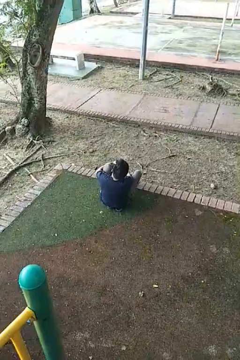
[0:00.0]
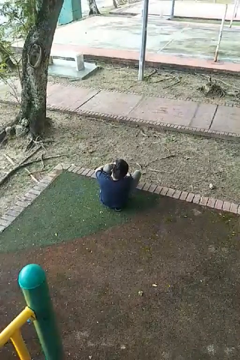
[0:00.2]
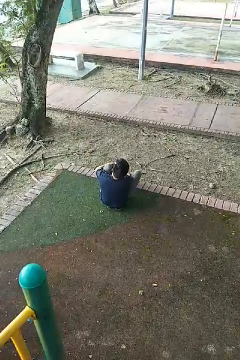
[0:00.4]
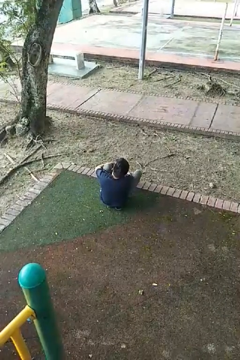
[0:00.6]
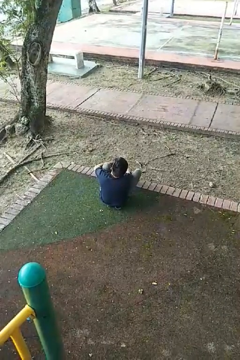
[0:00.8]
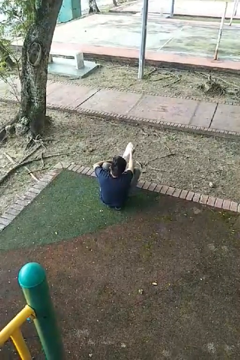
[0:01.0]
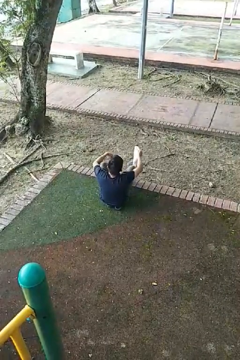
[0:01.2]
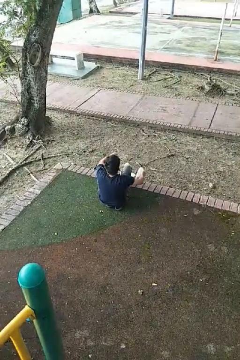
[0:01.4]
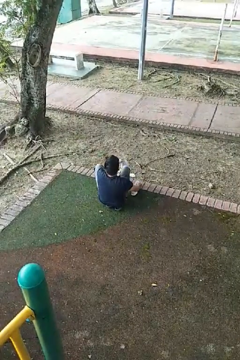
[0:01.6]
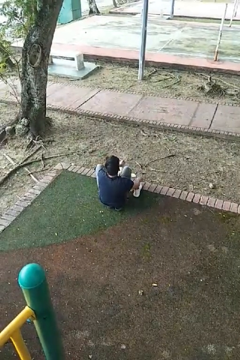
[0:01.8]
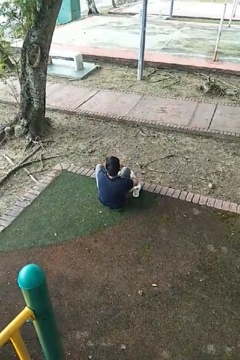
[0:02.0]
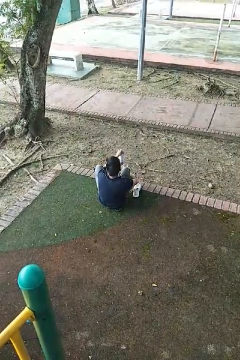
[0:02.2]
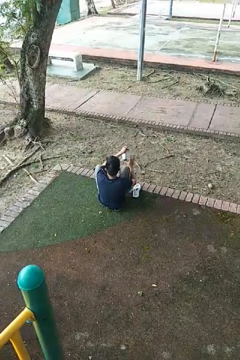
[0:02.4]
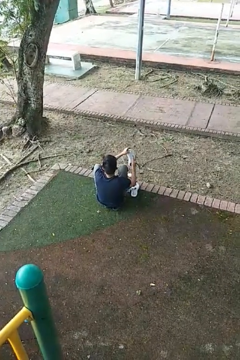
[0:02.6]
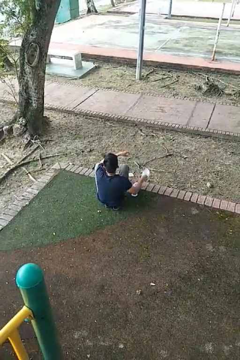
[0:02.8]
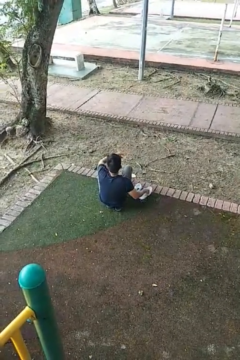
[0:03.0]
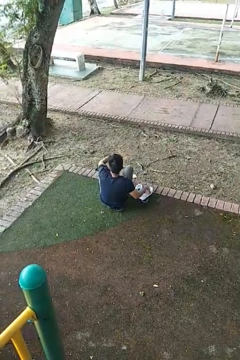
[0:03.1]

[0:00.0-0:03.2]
person takes off shoes

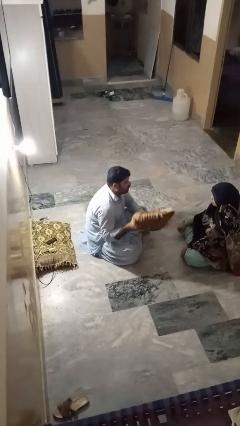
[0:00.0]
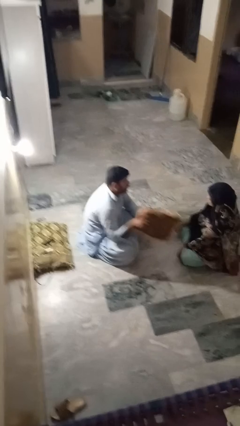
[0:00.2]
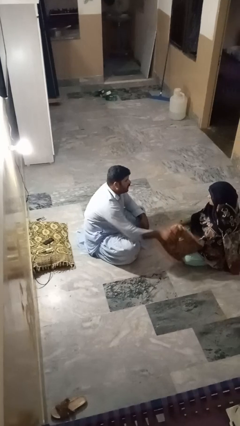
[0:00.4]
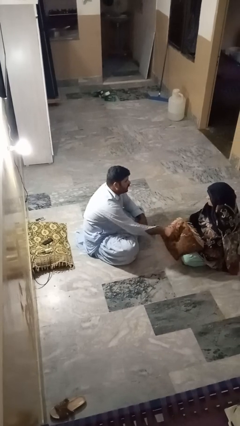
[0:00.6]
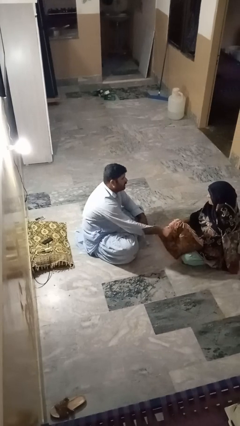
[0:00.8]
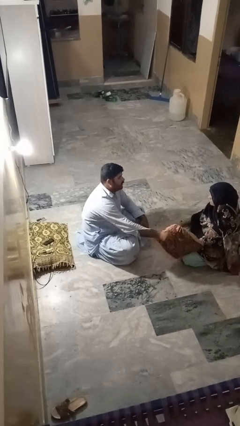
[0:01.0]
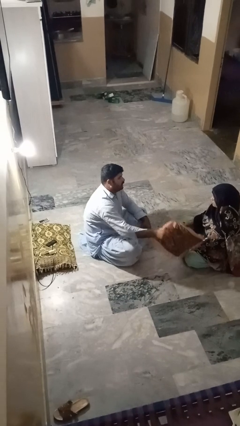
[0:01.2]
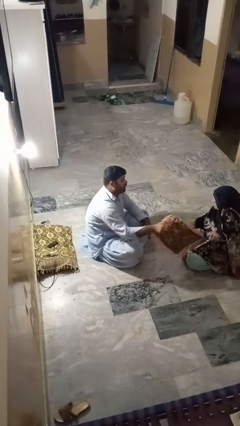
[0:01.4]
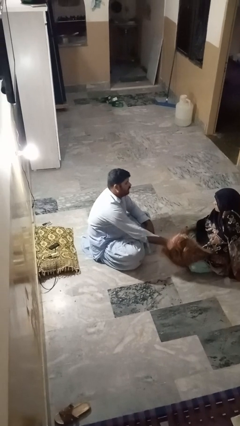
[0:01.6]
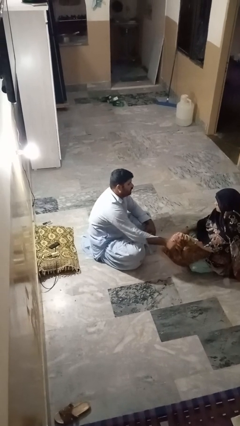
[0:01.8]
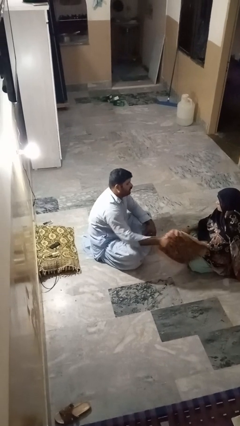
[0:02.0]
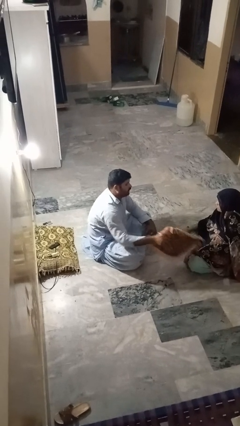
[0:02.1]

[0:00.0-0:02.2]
person hits person with pillow

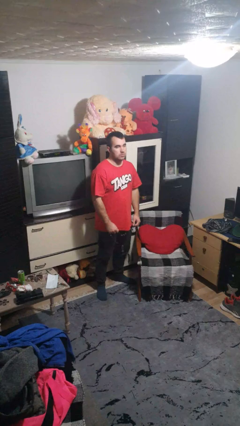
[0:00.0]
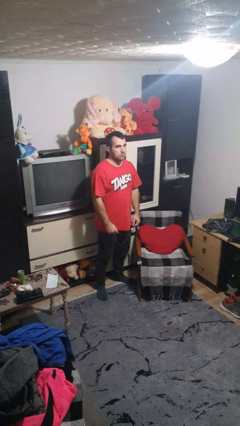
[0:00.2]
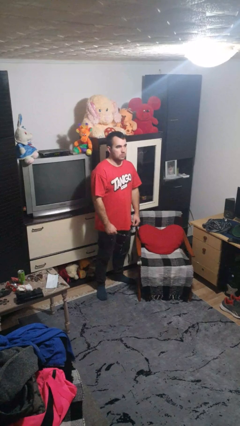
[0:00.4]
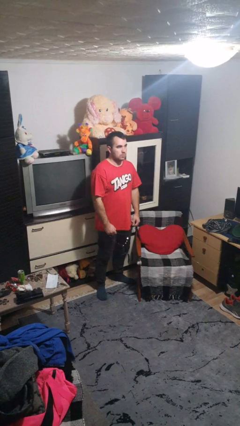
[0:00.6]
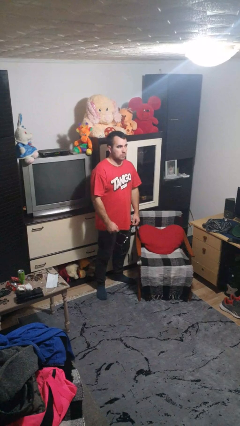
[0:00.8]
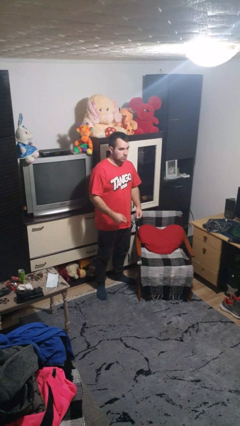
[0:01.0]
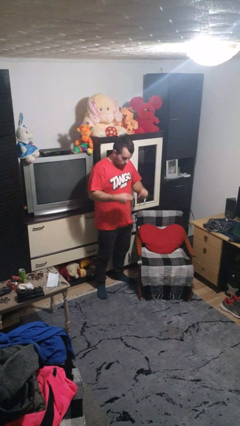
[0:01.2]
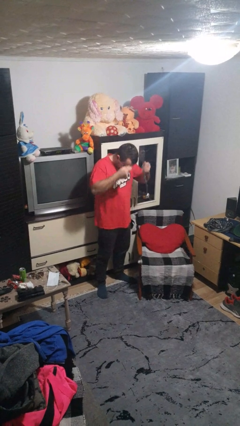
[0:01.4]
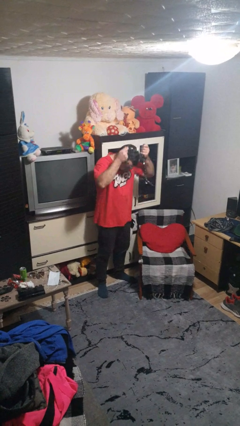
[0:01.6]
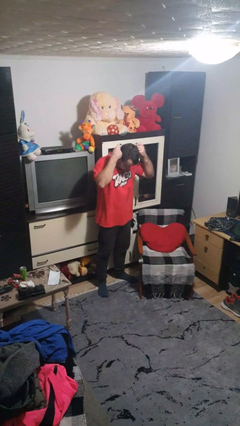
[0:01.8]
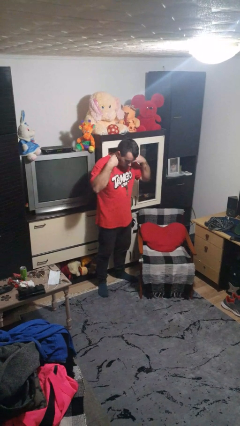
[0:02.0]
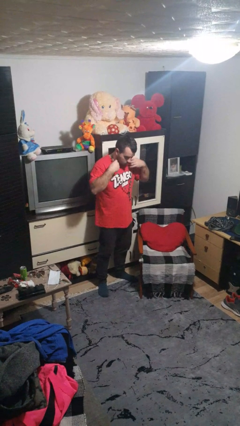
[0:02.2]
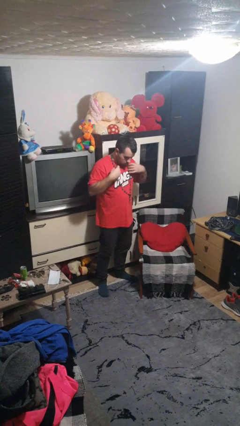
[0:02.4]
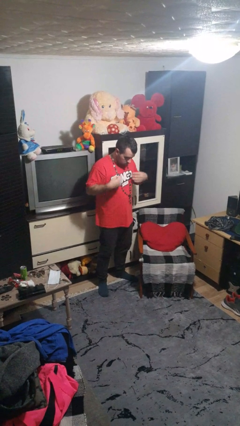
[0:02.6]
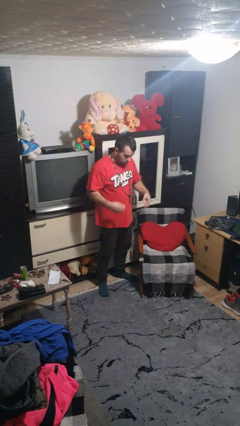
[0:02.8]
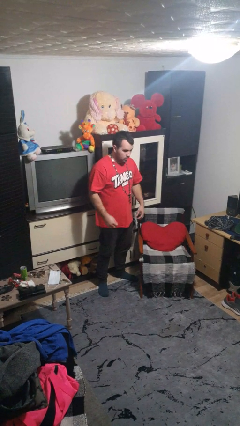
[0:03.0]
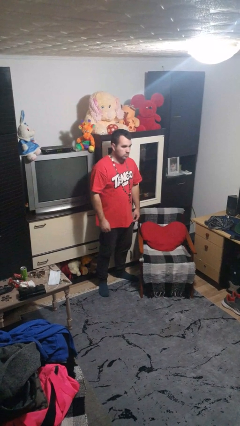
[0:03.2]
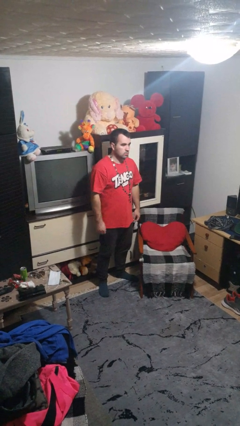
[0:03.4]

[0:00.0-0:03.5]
person puts on necklace

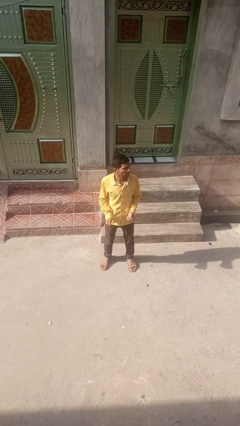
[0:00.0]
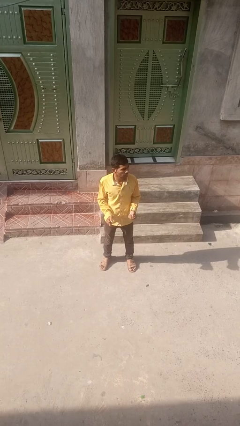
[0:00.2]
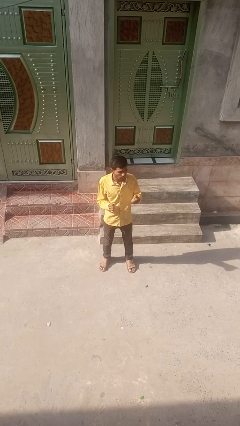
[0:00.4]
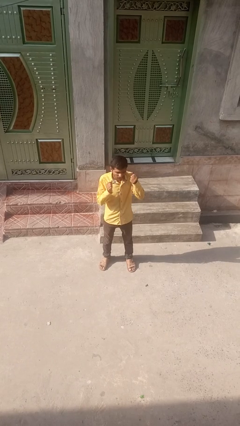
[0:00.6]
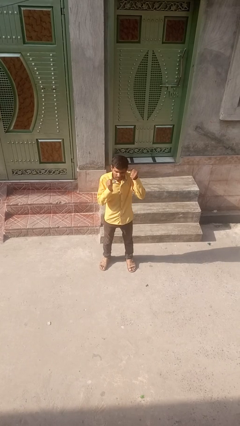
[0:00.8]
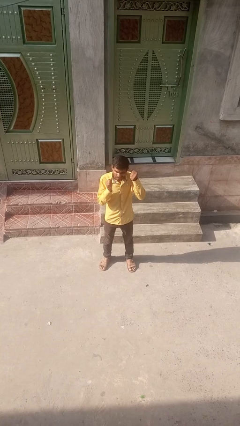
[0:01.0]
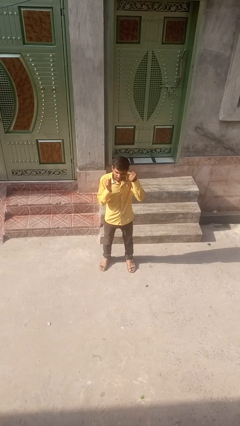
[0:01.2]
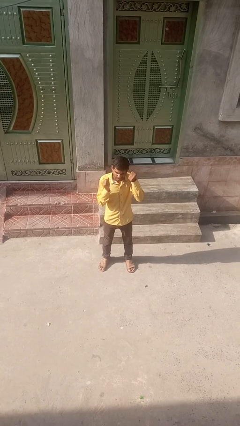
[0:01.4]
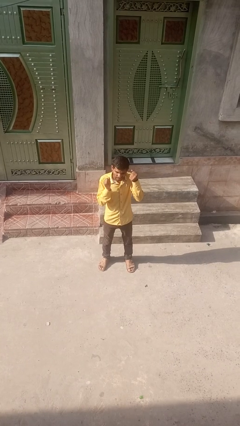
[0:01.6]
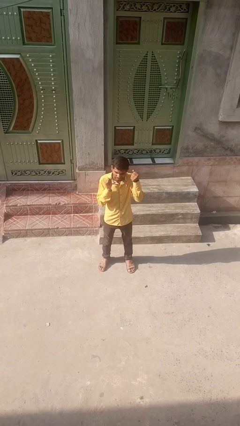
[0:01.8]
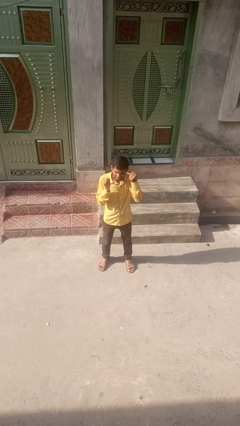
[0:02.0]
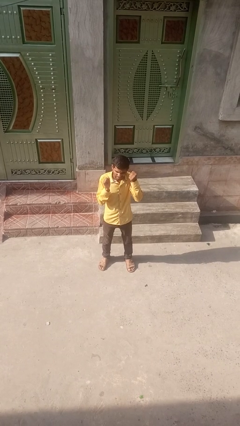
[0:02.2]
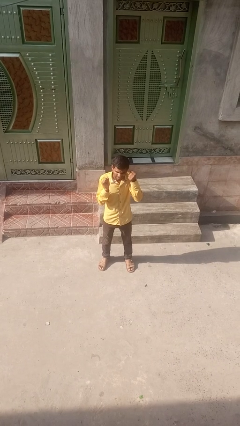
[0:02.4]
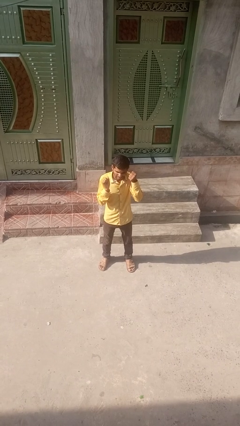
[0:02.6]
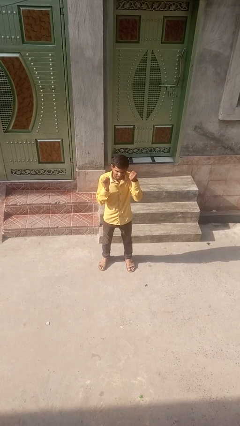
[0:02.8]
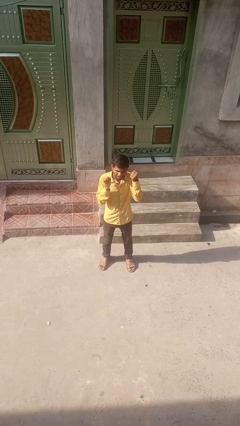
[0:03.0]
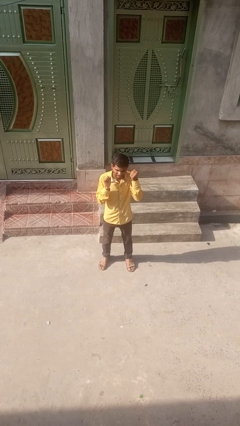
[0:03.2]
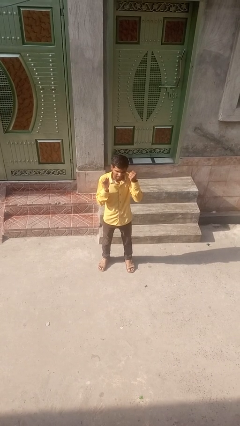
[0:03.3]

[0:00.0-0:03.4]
person flosses

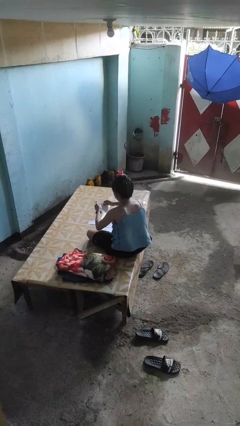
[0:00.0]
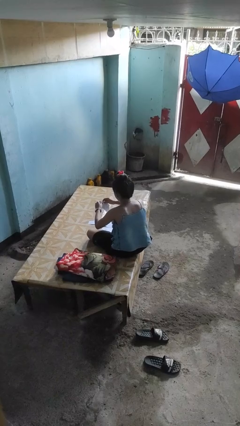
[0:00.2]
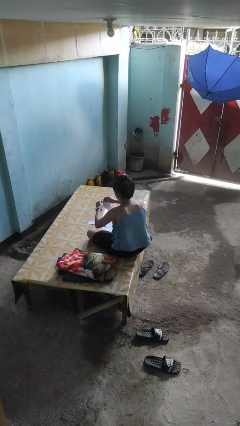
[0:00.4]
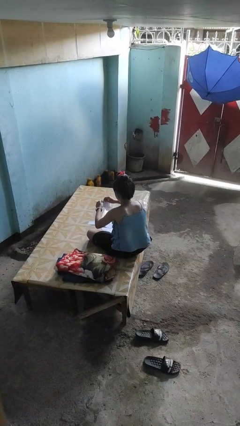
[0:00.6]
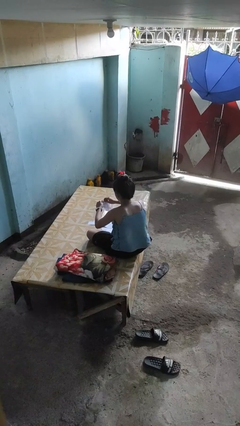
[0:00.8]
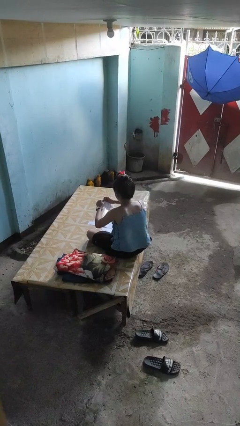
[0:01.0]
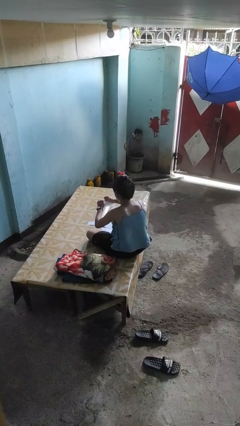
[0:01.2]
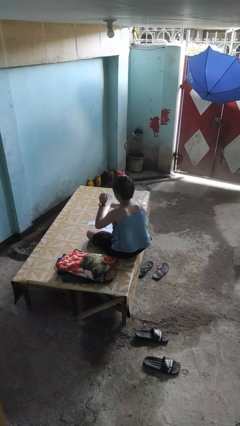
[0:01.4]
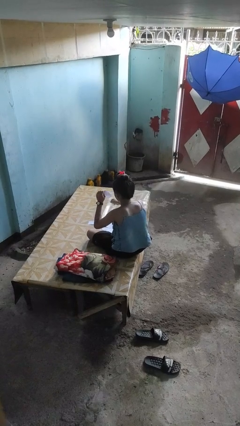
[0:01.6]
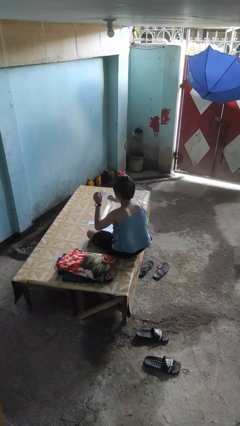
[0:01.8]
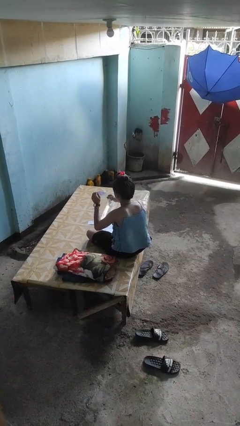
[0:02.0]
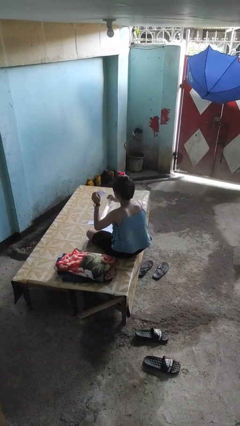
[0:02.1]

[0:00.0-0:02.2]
person tears paper

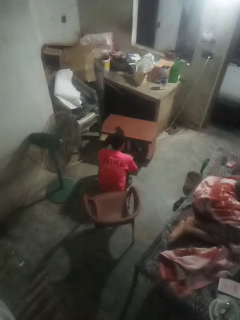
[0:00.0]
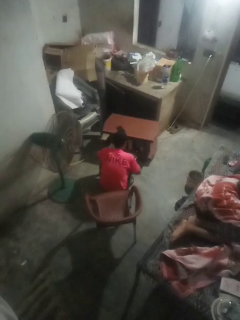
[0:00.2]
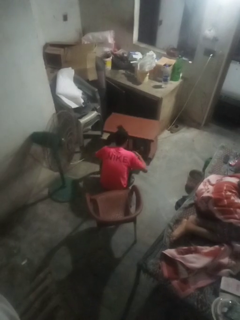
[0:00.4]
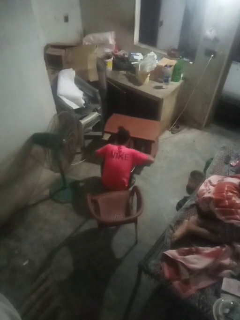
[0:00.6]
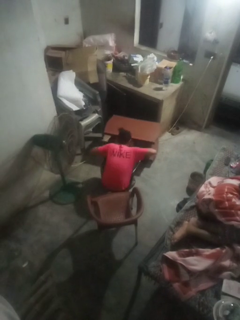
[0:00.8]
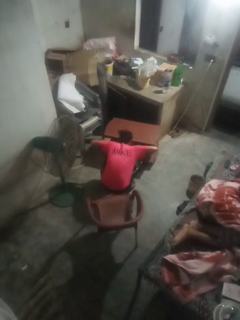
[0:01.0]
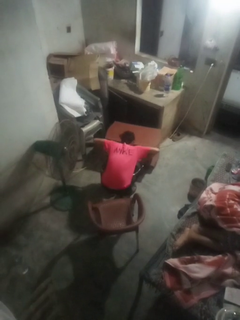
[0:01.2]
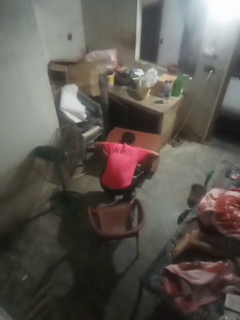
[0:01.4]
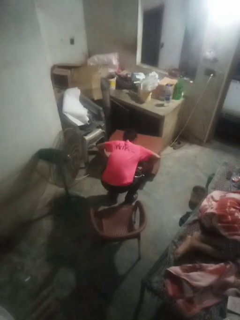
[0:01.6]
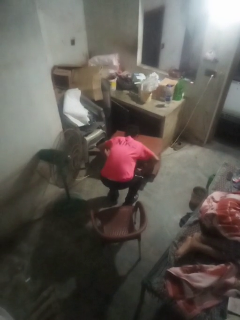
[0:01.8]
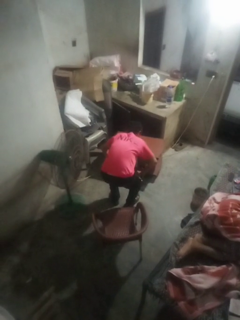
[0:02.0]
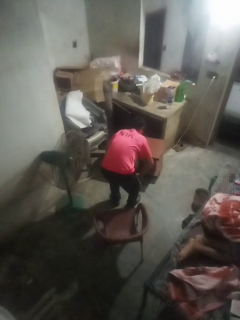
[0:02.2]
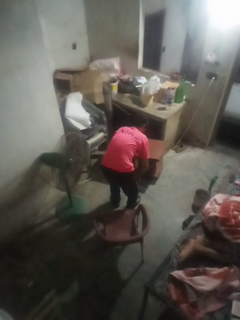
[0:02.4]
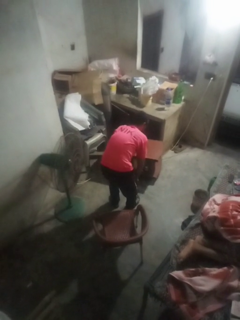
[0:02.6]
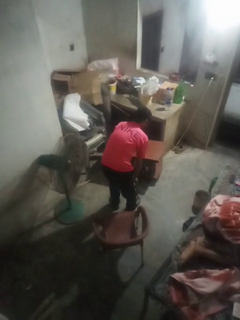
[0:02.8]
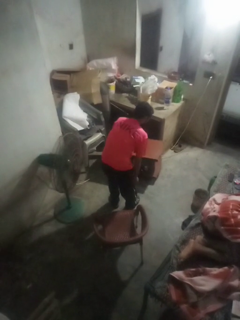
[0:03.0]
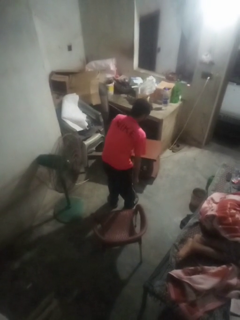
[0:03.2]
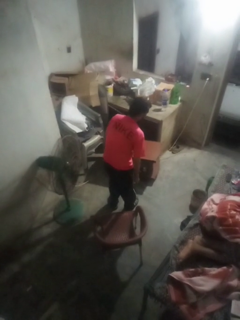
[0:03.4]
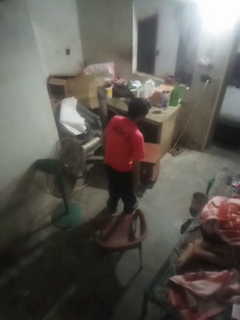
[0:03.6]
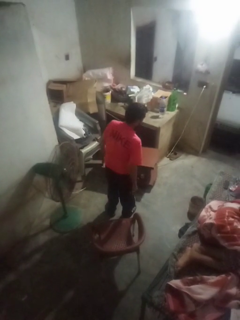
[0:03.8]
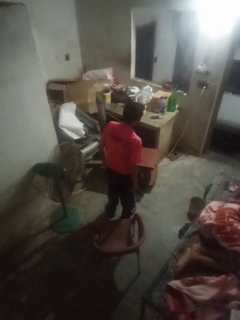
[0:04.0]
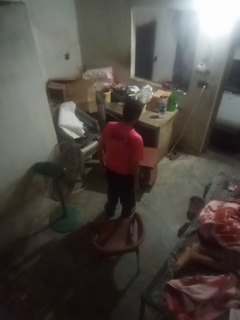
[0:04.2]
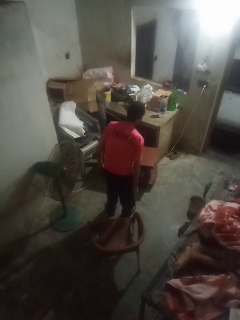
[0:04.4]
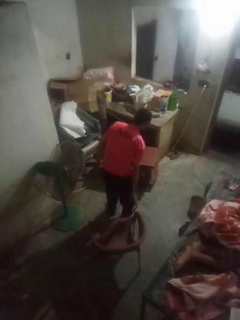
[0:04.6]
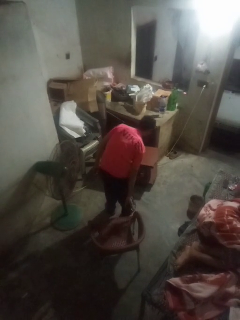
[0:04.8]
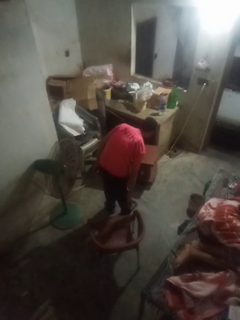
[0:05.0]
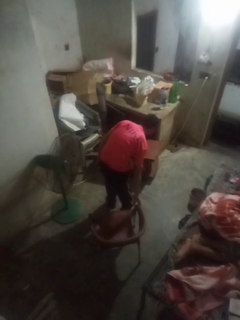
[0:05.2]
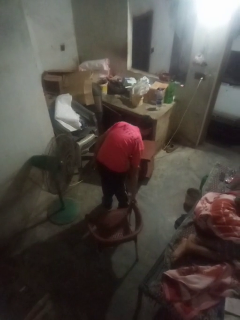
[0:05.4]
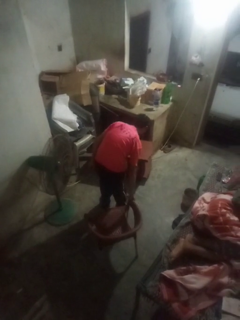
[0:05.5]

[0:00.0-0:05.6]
person stands up from floor
